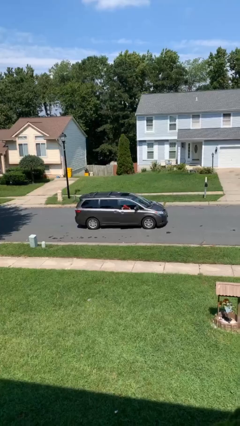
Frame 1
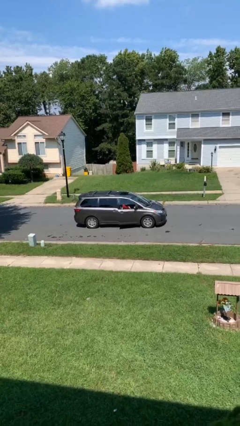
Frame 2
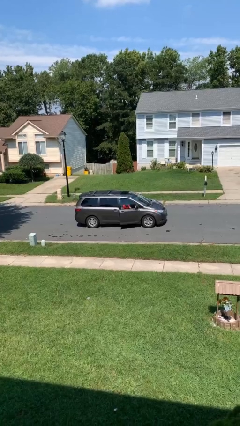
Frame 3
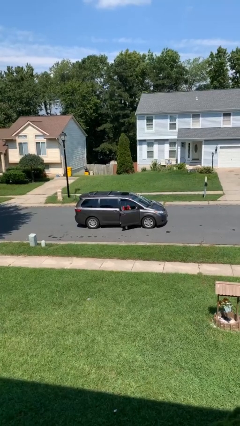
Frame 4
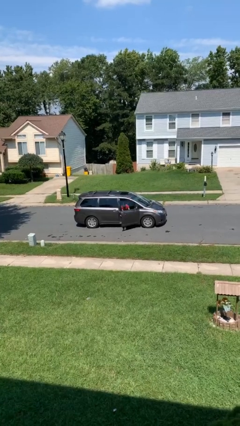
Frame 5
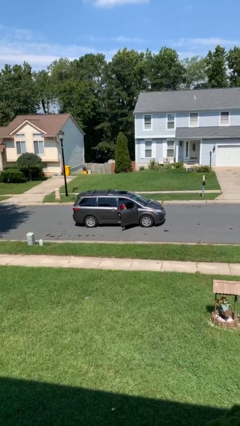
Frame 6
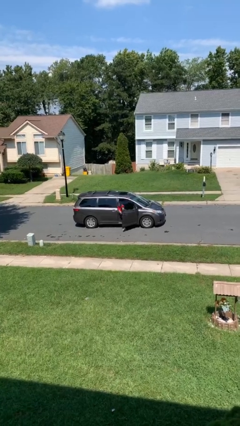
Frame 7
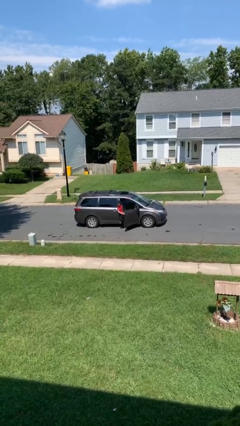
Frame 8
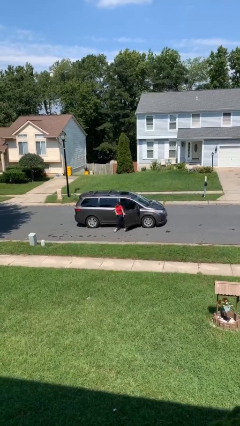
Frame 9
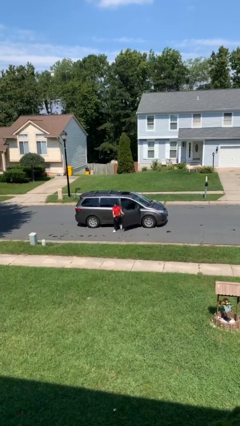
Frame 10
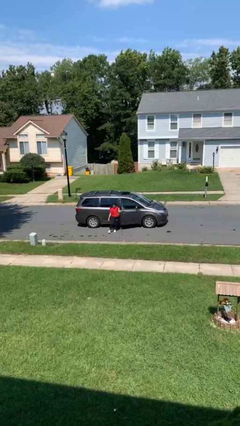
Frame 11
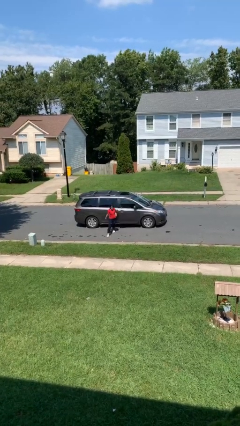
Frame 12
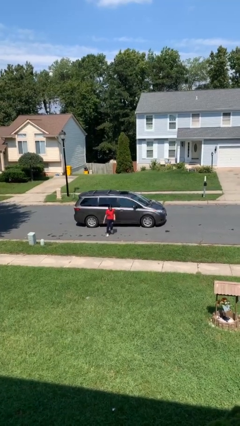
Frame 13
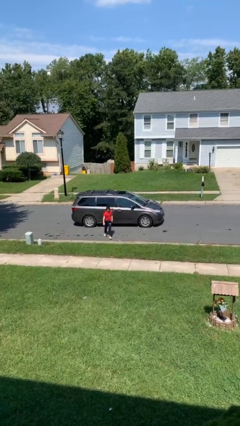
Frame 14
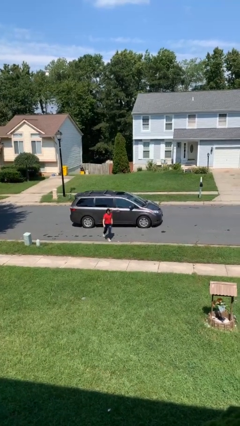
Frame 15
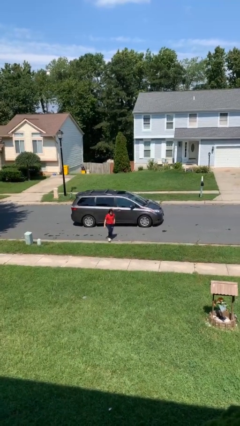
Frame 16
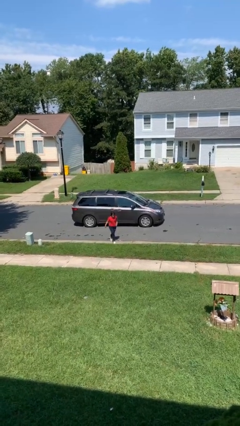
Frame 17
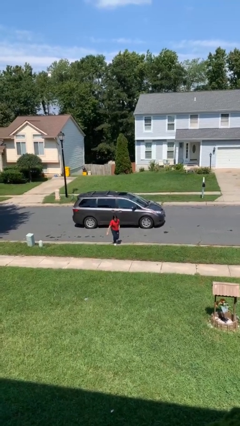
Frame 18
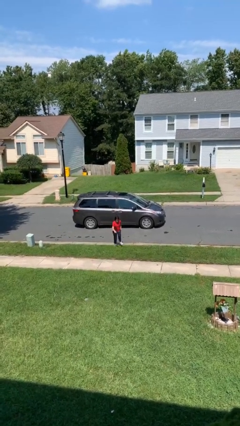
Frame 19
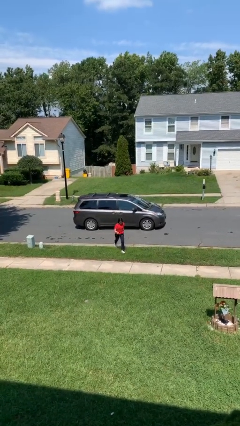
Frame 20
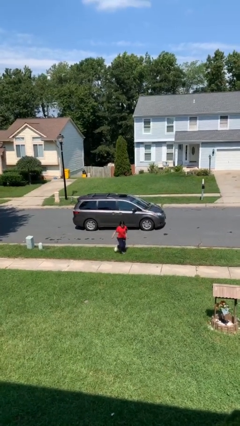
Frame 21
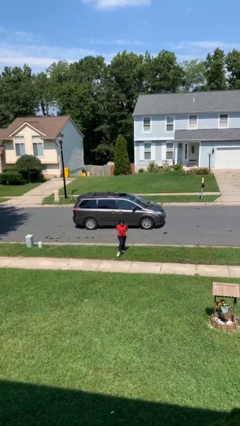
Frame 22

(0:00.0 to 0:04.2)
car drops off person

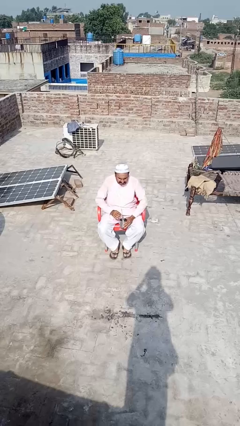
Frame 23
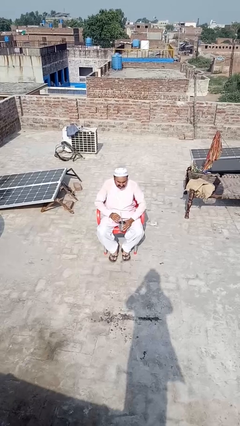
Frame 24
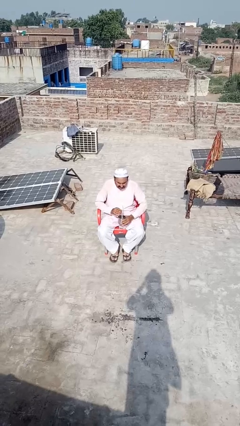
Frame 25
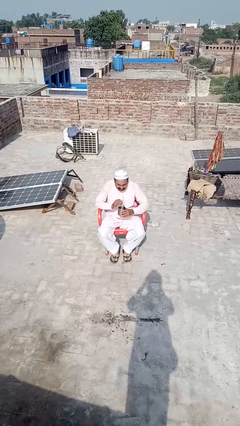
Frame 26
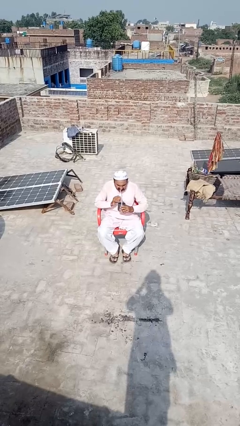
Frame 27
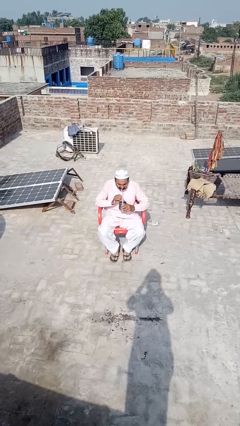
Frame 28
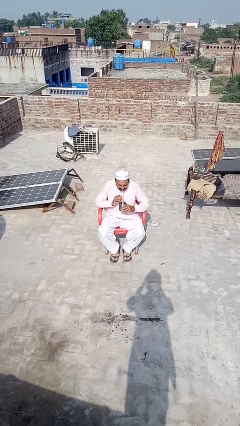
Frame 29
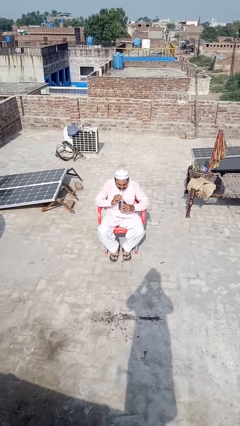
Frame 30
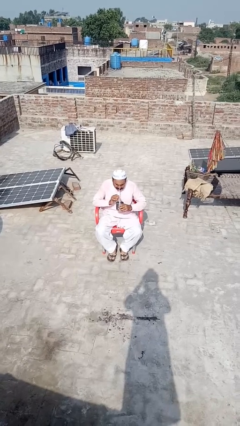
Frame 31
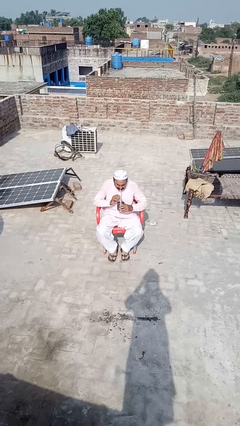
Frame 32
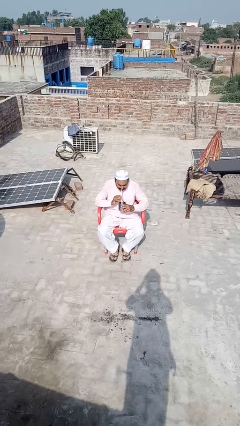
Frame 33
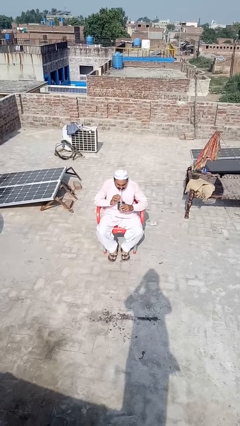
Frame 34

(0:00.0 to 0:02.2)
person drinks from straw

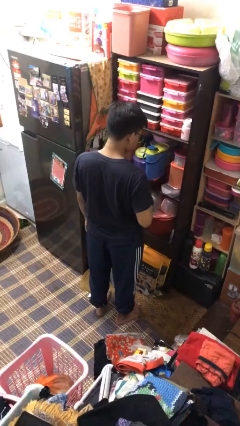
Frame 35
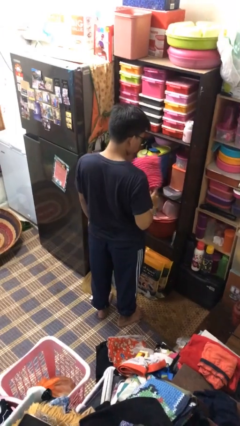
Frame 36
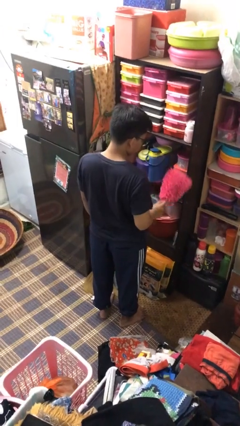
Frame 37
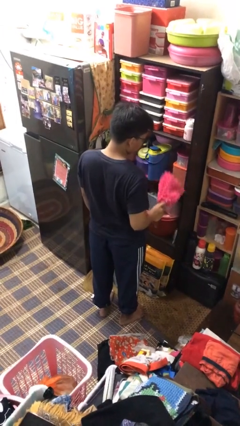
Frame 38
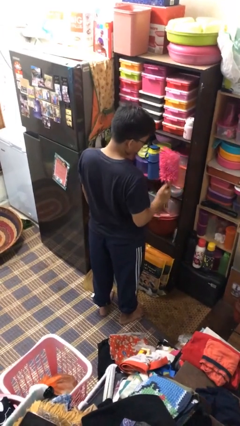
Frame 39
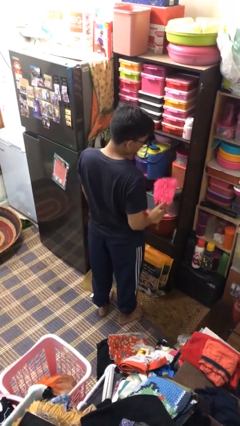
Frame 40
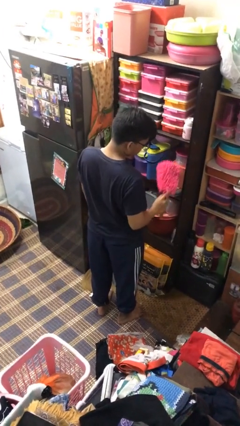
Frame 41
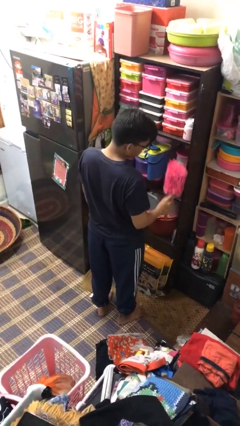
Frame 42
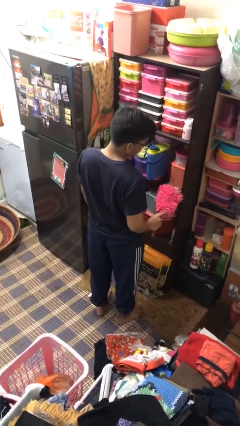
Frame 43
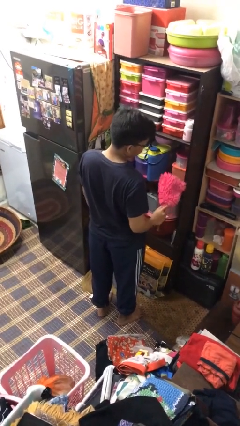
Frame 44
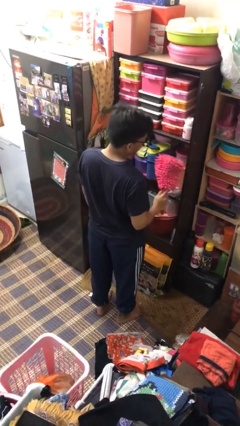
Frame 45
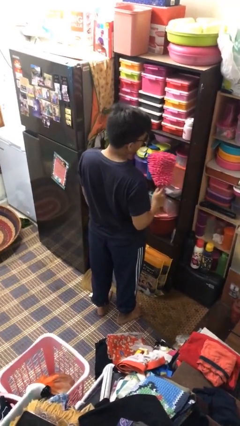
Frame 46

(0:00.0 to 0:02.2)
person dusts furniture

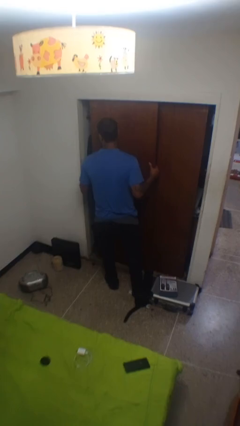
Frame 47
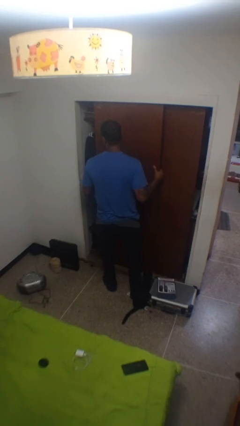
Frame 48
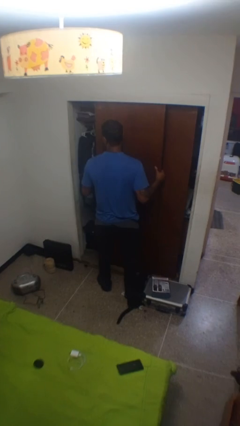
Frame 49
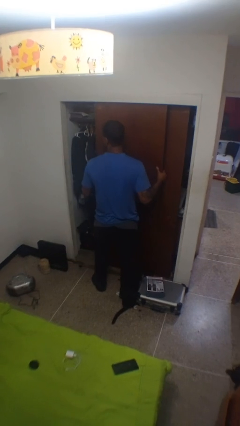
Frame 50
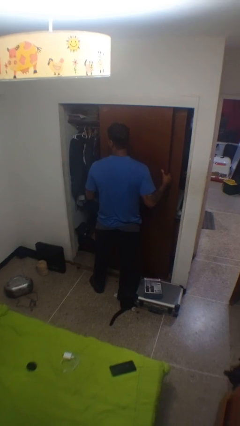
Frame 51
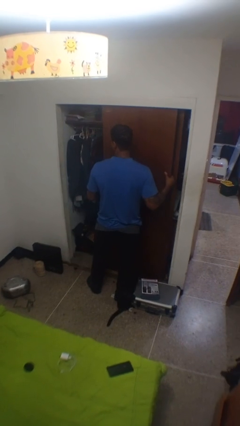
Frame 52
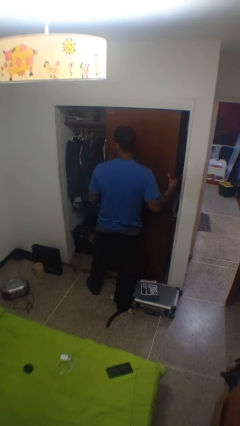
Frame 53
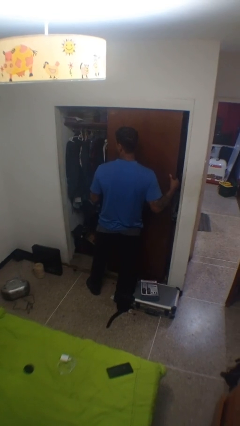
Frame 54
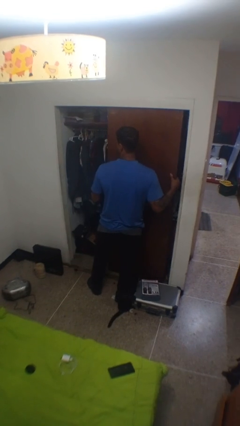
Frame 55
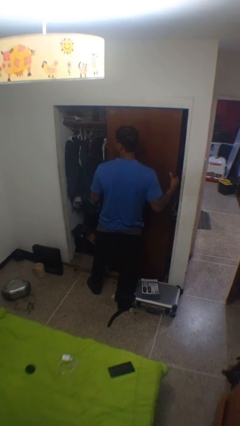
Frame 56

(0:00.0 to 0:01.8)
person opens closet door

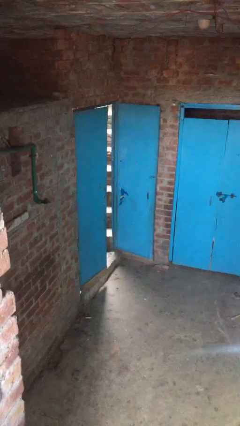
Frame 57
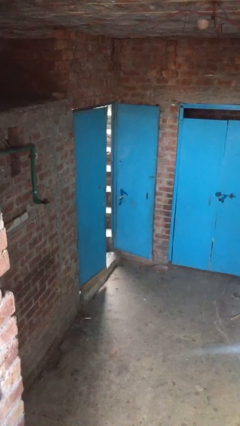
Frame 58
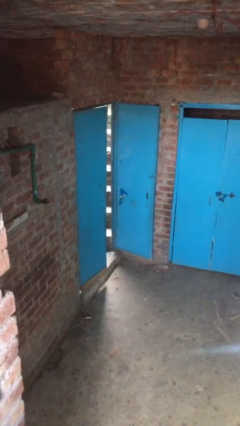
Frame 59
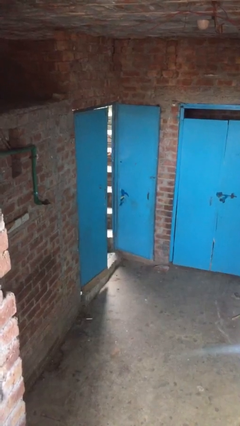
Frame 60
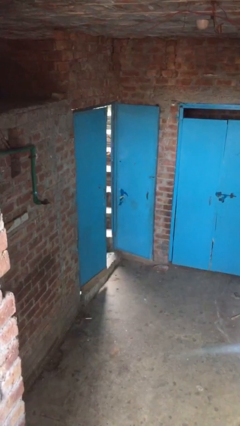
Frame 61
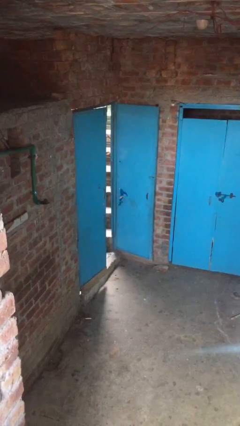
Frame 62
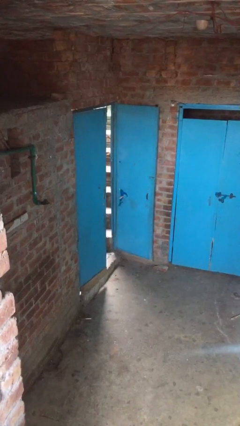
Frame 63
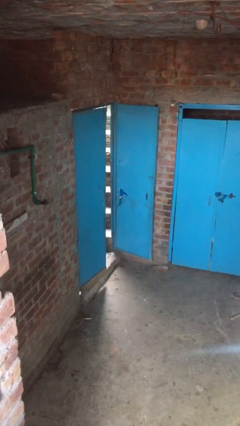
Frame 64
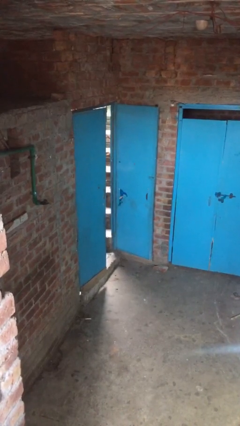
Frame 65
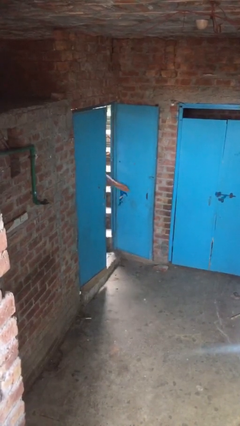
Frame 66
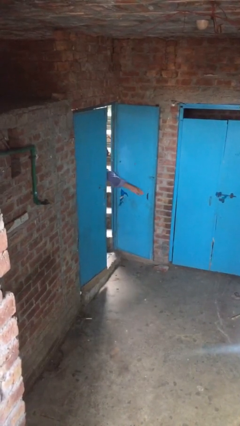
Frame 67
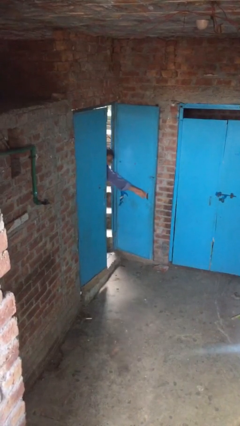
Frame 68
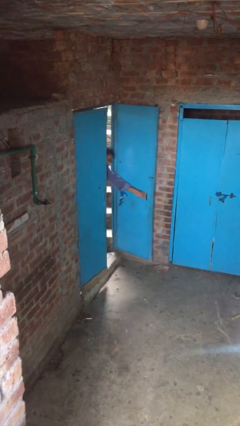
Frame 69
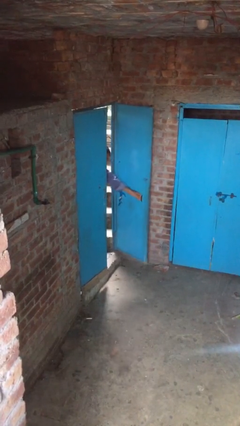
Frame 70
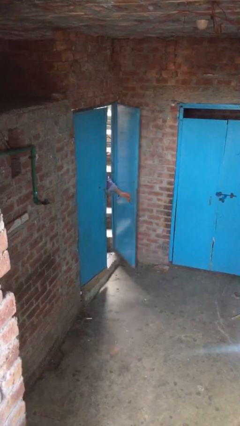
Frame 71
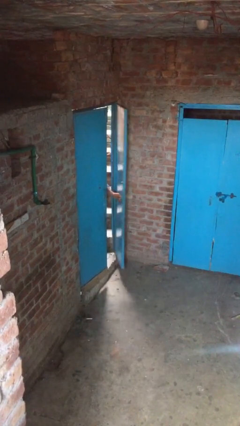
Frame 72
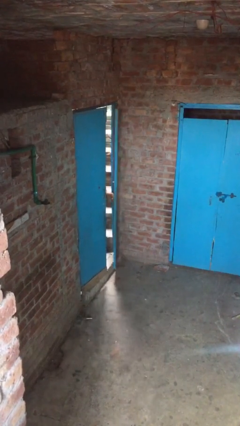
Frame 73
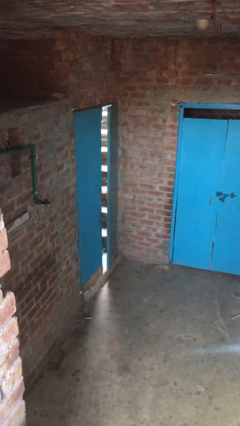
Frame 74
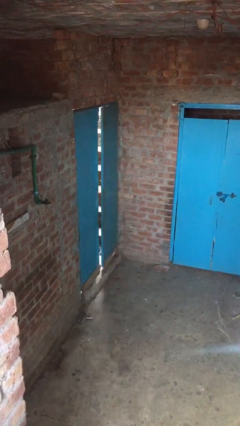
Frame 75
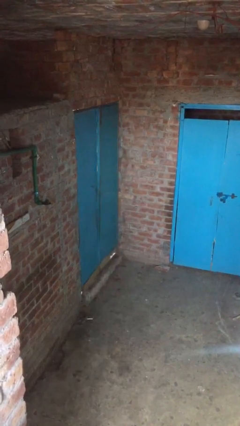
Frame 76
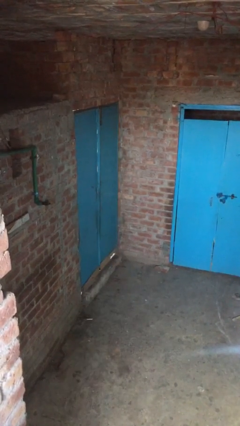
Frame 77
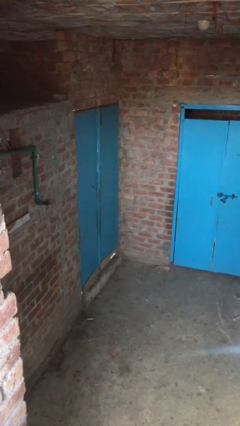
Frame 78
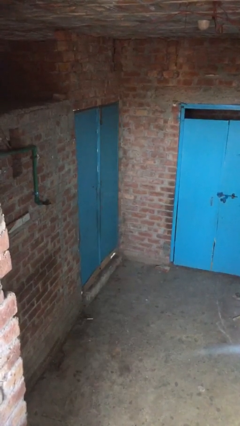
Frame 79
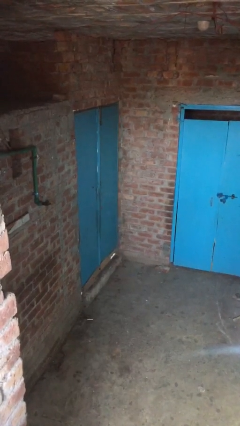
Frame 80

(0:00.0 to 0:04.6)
person closes facility door

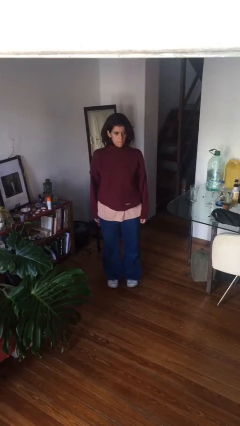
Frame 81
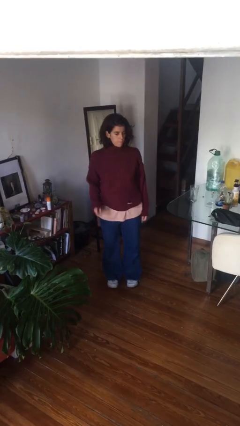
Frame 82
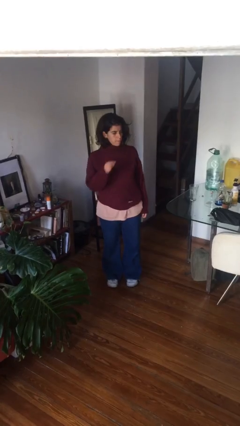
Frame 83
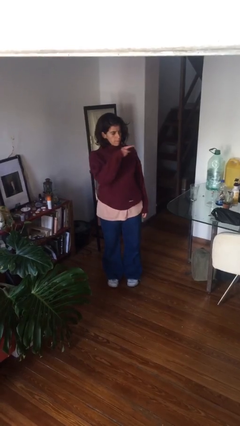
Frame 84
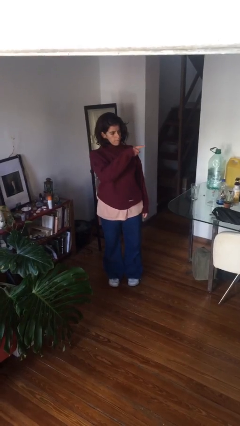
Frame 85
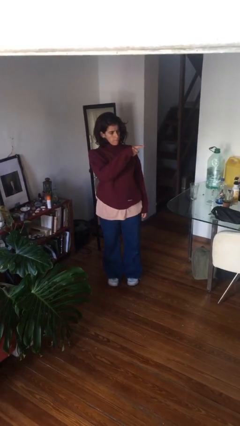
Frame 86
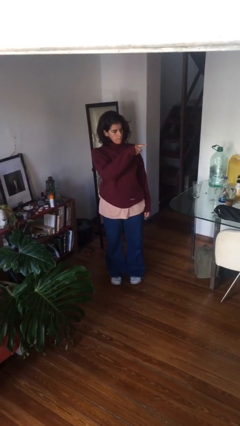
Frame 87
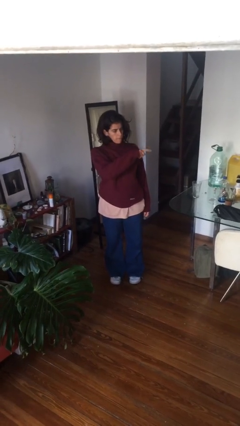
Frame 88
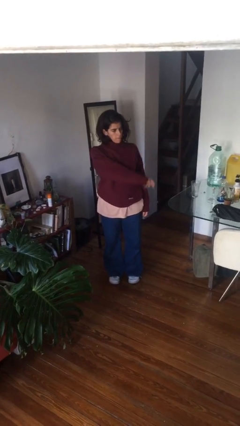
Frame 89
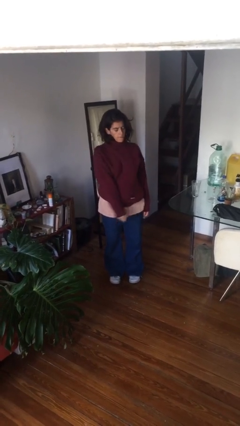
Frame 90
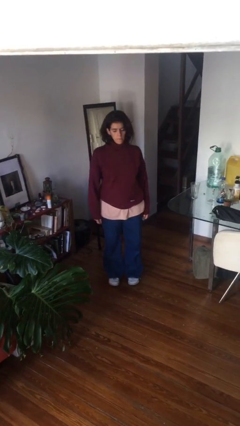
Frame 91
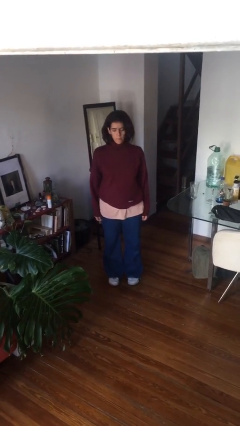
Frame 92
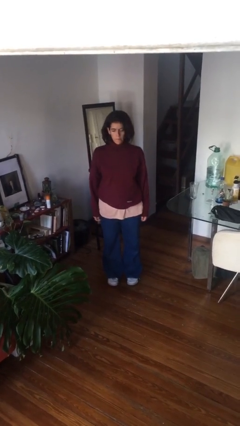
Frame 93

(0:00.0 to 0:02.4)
person gestures swipe left

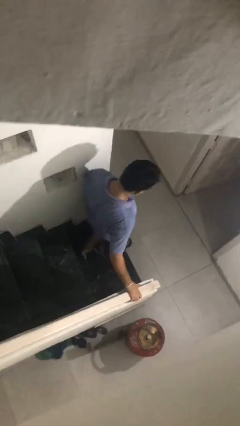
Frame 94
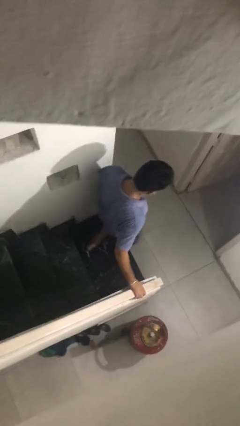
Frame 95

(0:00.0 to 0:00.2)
person trips on stair
